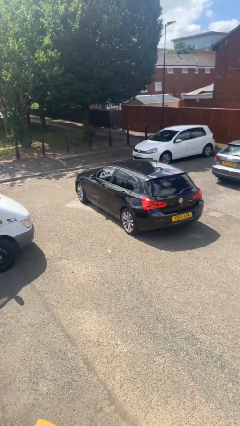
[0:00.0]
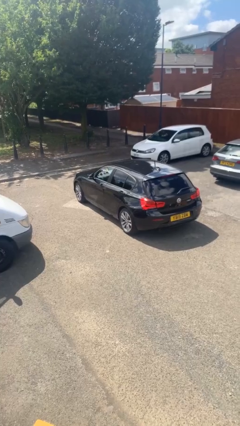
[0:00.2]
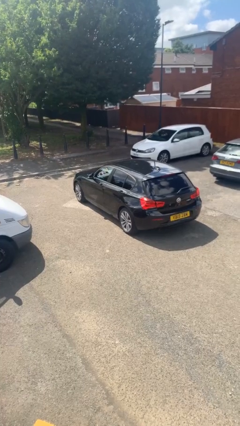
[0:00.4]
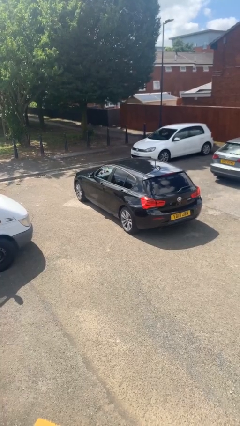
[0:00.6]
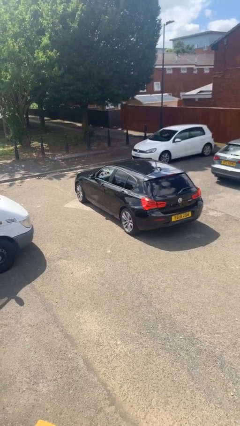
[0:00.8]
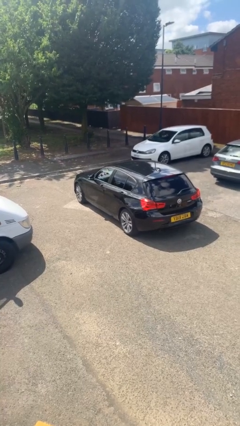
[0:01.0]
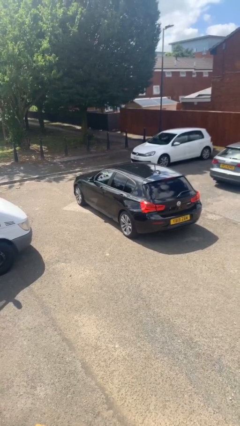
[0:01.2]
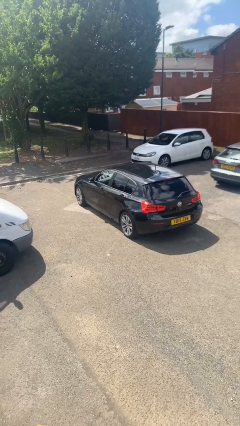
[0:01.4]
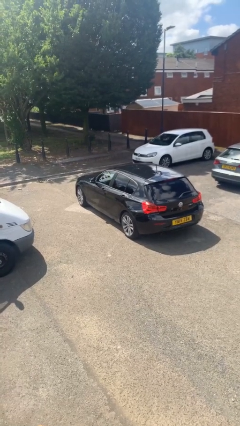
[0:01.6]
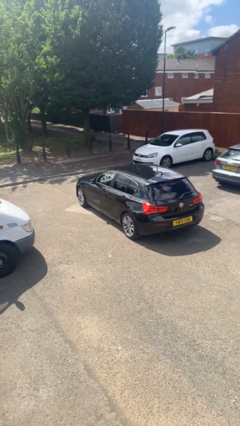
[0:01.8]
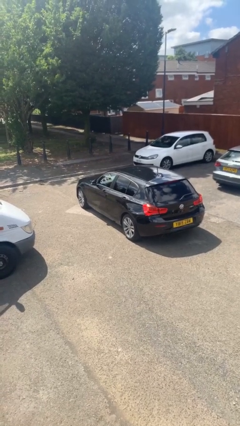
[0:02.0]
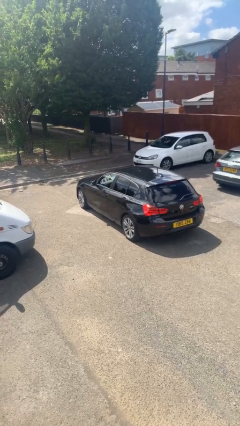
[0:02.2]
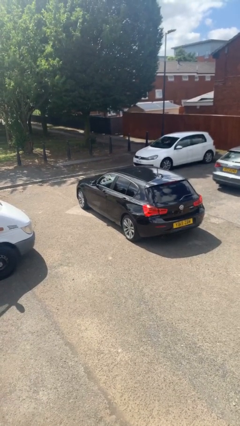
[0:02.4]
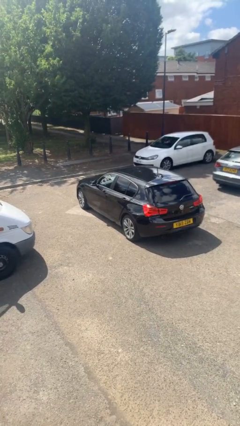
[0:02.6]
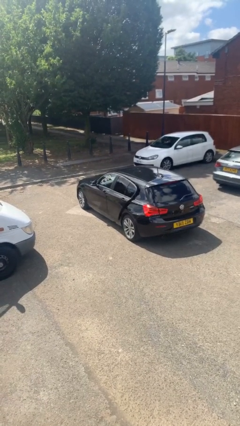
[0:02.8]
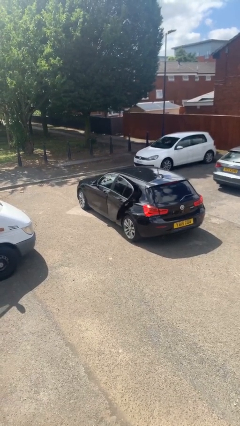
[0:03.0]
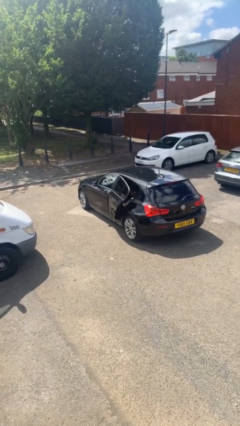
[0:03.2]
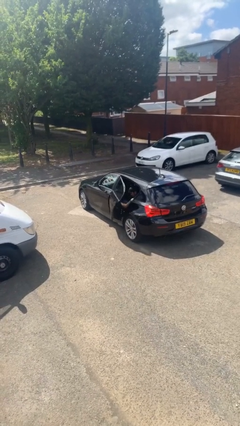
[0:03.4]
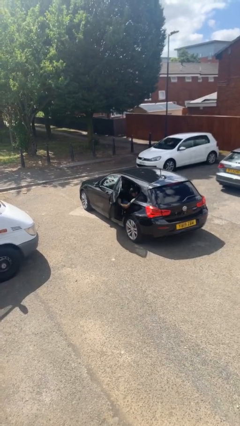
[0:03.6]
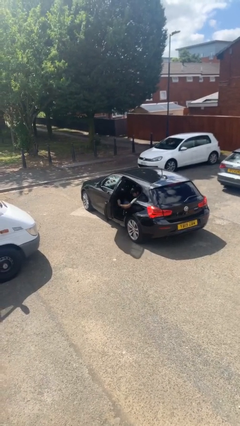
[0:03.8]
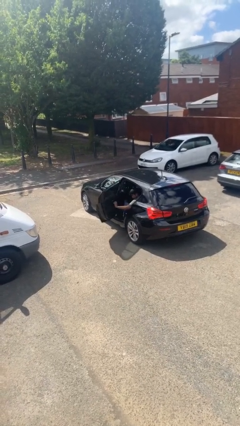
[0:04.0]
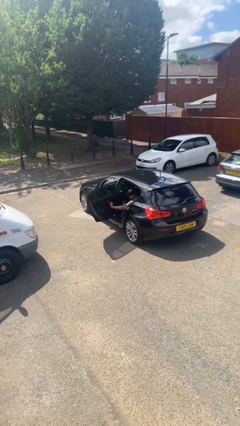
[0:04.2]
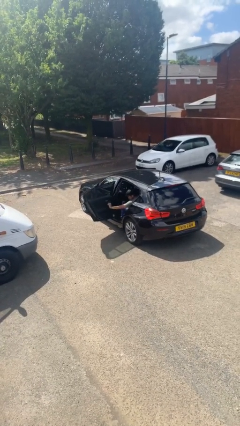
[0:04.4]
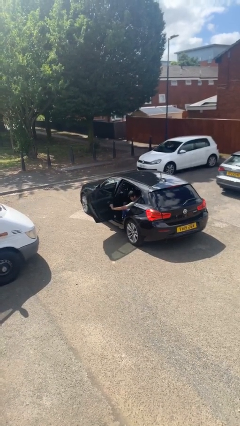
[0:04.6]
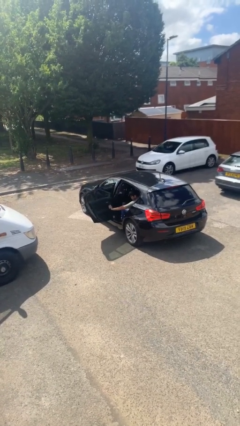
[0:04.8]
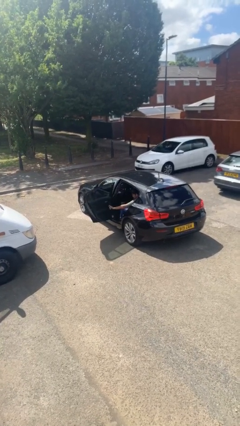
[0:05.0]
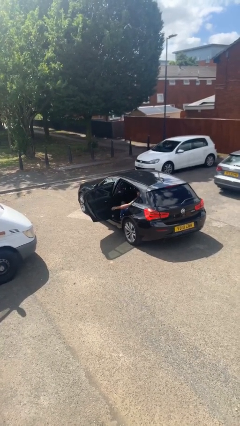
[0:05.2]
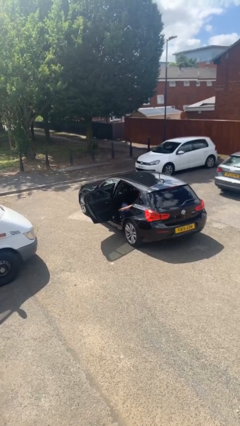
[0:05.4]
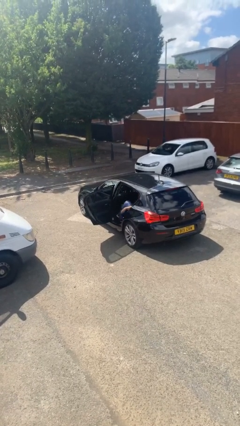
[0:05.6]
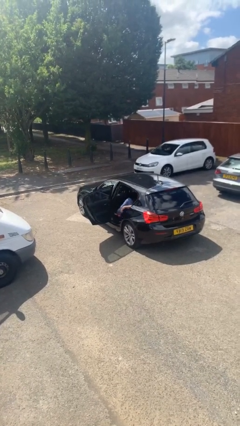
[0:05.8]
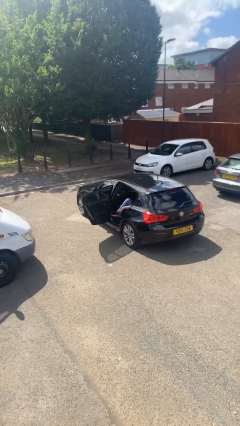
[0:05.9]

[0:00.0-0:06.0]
person opens car door

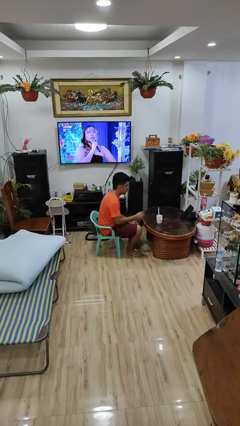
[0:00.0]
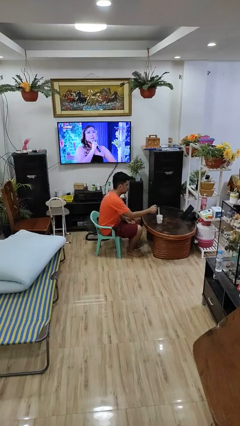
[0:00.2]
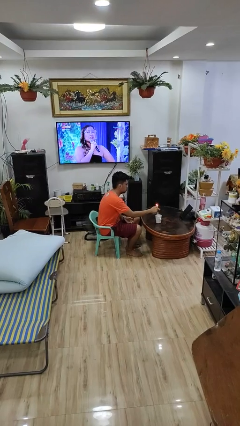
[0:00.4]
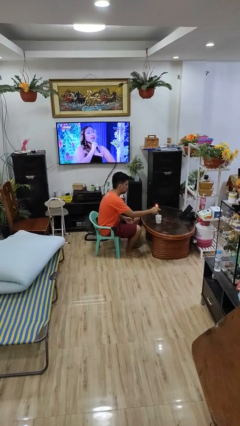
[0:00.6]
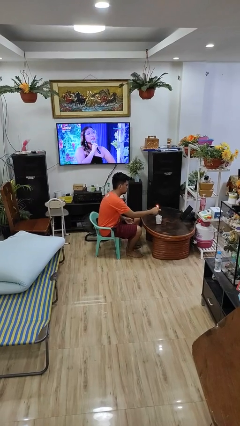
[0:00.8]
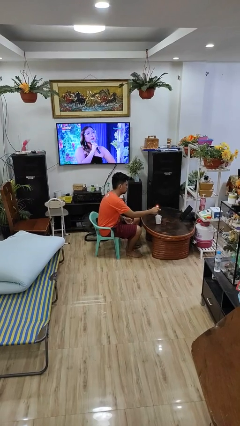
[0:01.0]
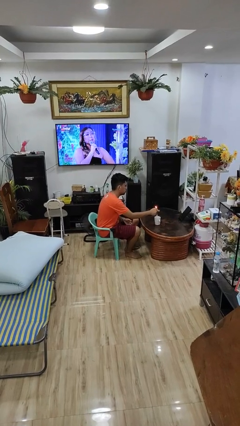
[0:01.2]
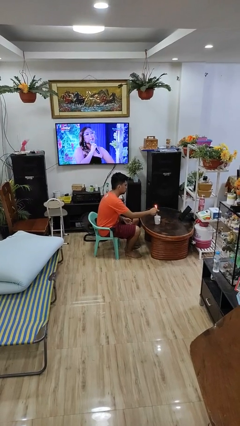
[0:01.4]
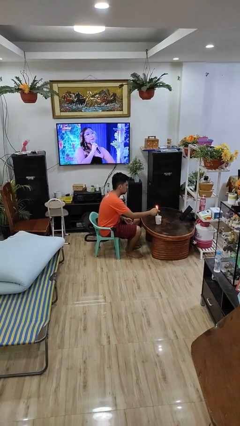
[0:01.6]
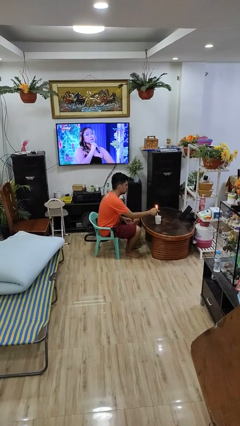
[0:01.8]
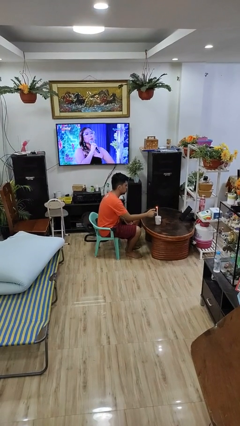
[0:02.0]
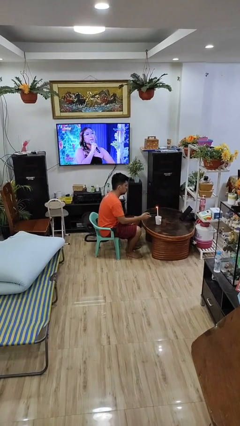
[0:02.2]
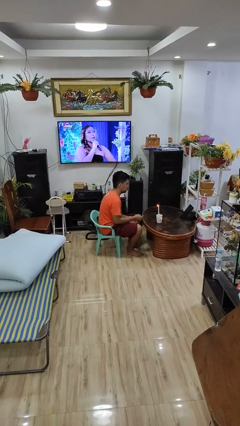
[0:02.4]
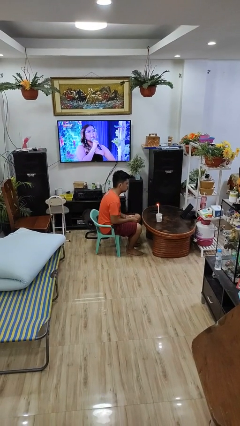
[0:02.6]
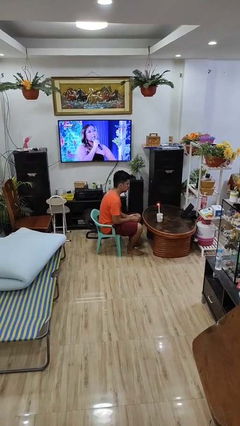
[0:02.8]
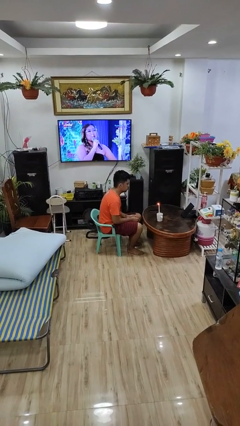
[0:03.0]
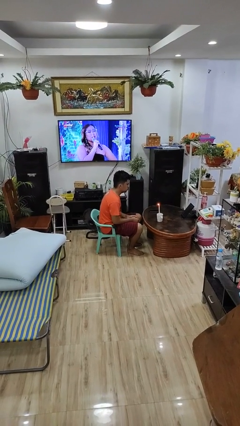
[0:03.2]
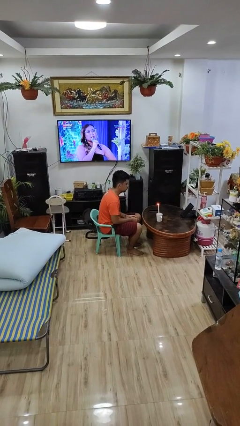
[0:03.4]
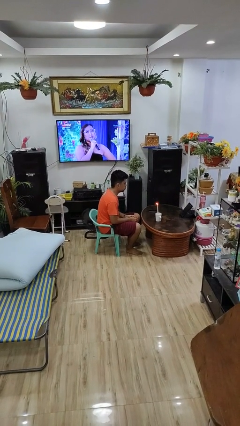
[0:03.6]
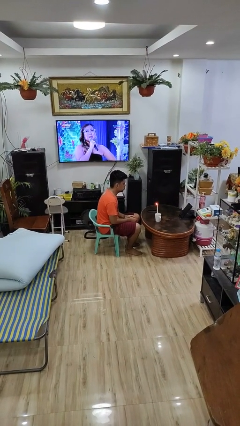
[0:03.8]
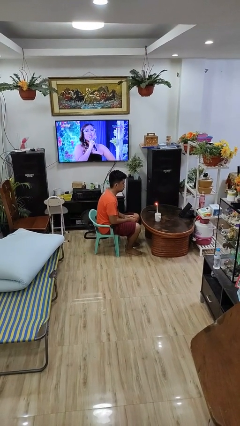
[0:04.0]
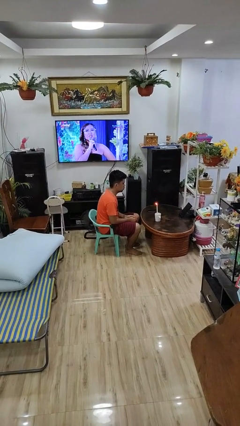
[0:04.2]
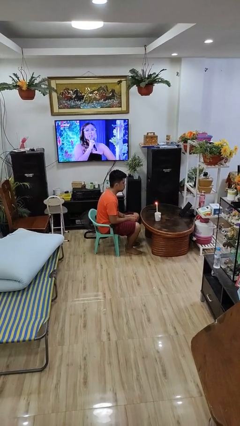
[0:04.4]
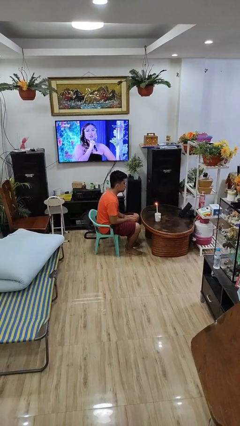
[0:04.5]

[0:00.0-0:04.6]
person lights candle

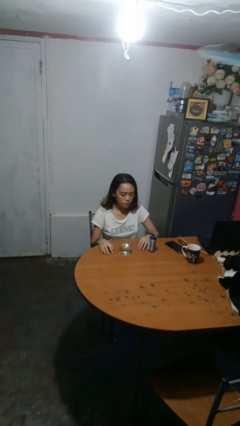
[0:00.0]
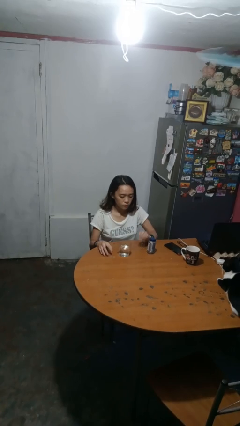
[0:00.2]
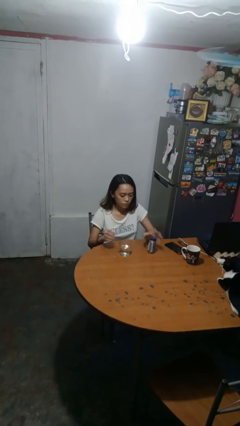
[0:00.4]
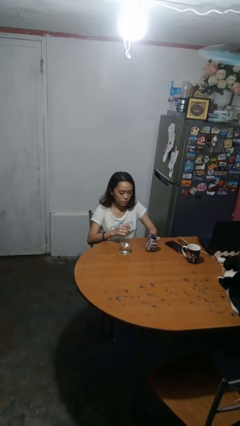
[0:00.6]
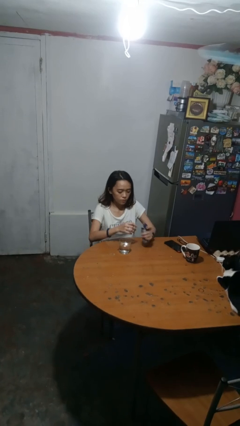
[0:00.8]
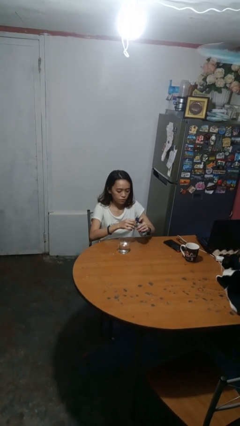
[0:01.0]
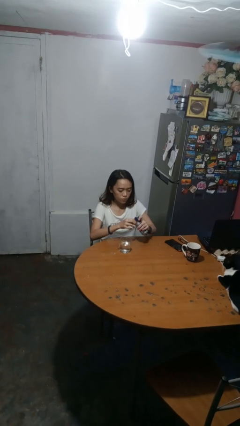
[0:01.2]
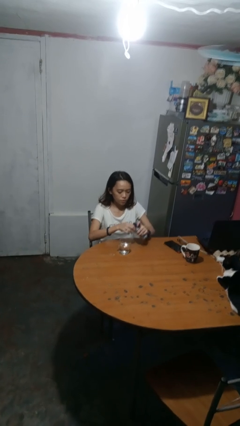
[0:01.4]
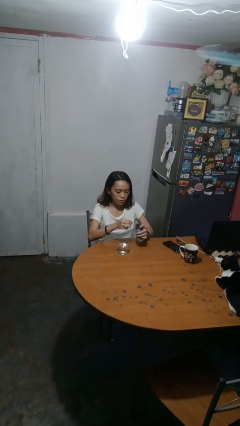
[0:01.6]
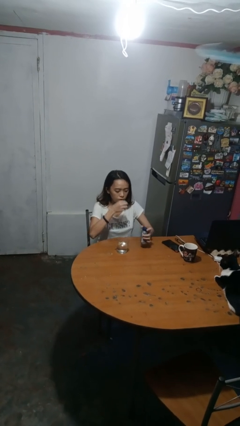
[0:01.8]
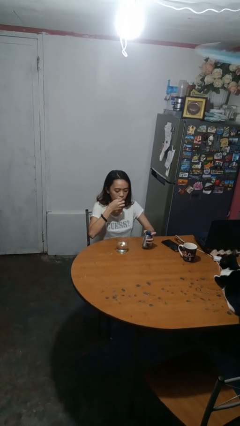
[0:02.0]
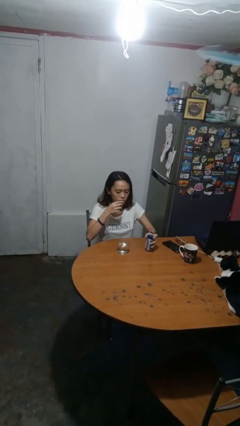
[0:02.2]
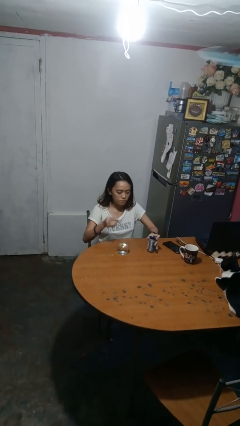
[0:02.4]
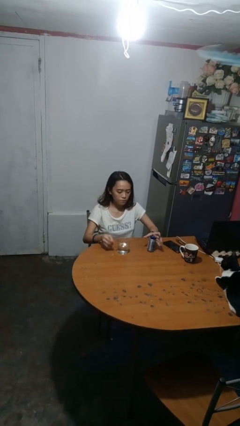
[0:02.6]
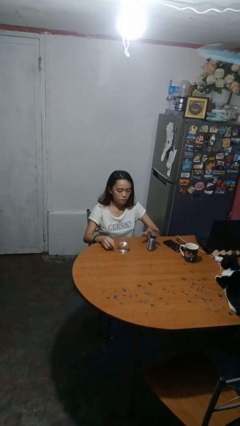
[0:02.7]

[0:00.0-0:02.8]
person takes medicine pills

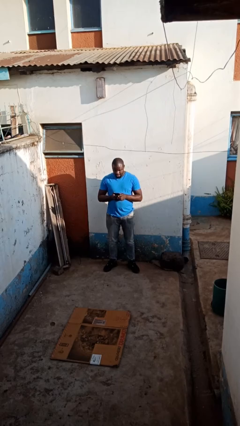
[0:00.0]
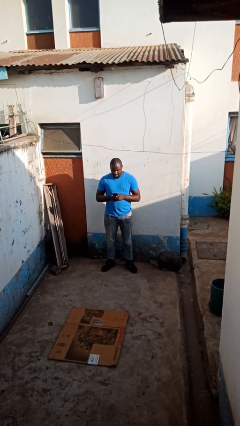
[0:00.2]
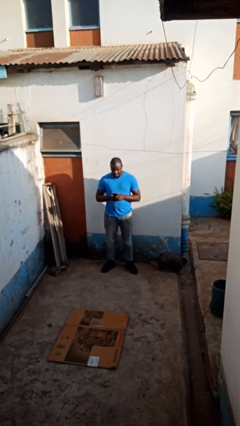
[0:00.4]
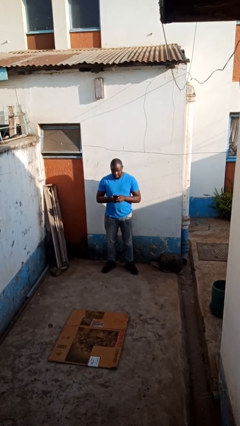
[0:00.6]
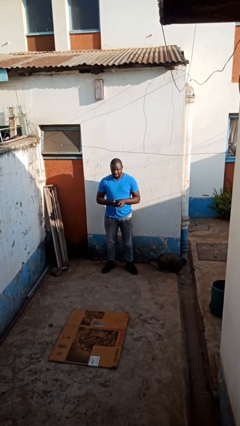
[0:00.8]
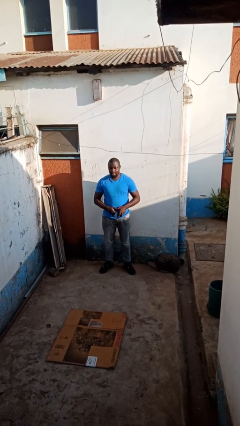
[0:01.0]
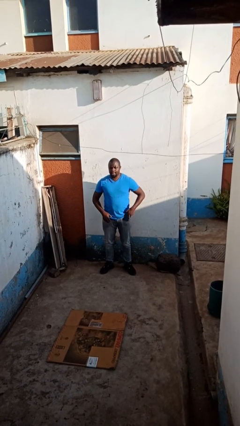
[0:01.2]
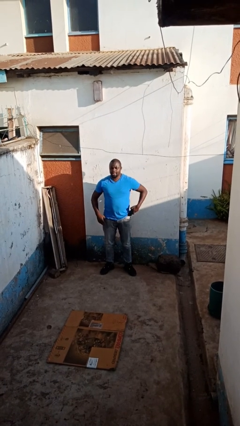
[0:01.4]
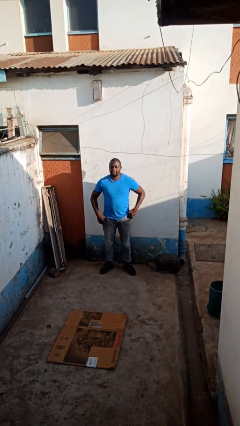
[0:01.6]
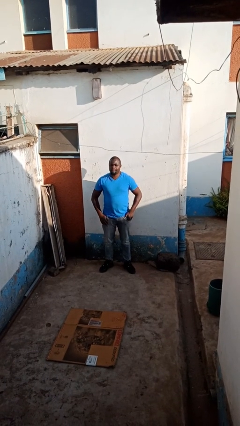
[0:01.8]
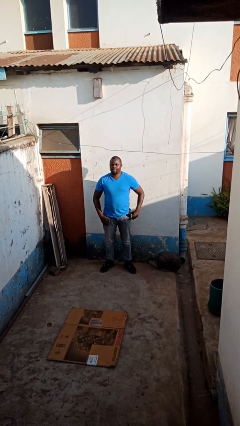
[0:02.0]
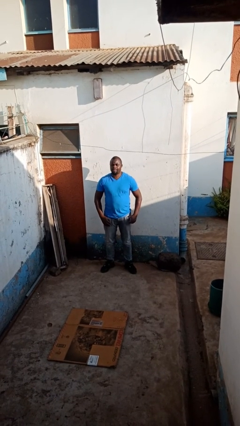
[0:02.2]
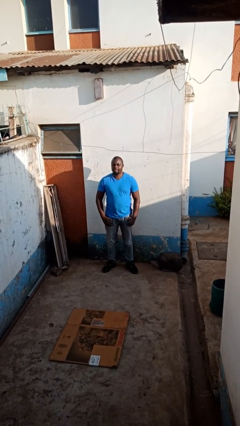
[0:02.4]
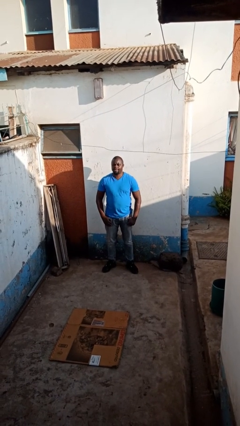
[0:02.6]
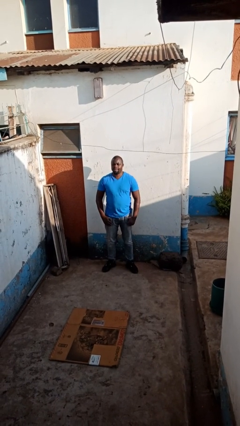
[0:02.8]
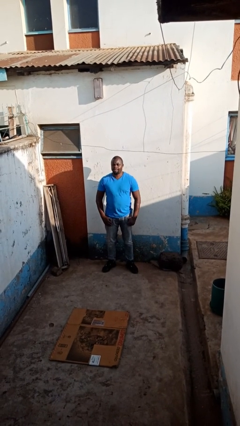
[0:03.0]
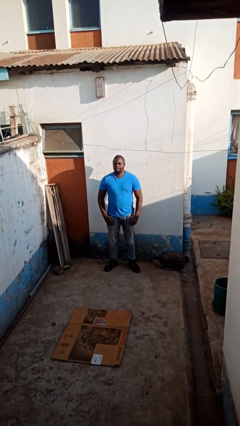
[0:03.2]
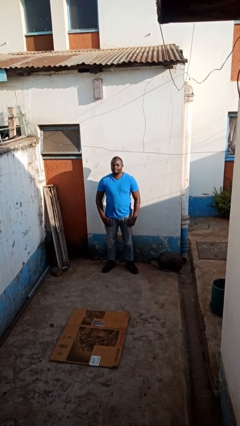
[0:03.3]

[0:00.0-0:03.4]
person puts phone into pocket

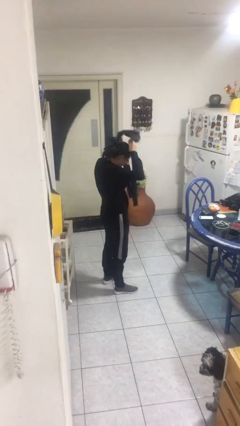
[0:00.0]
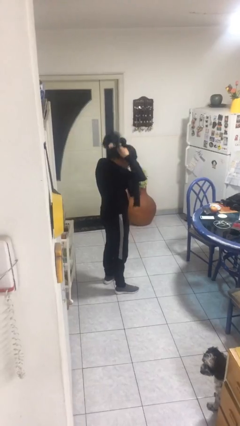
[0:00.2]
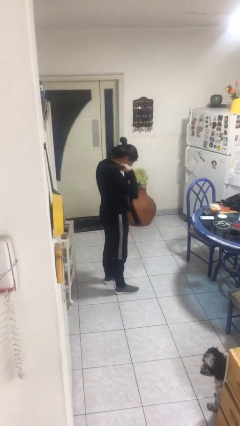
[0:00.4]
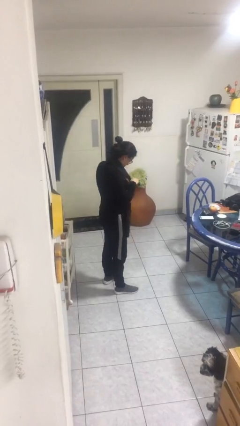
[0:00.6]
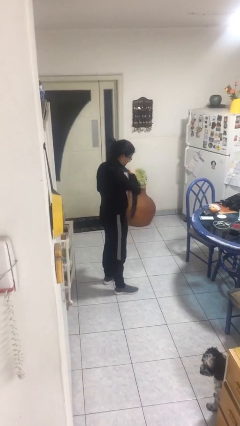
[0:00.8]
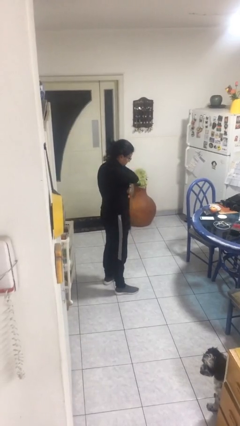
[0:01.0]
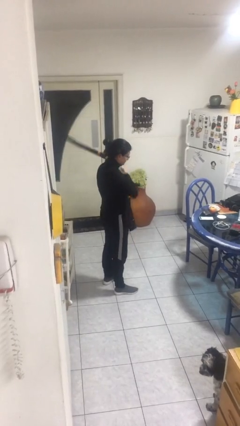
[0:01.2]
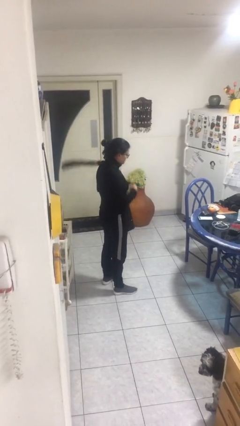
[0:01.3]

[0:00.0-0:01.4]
person puts on scarf
